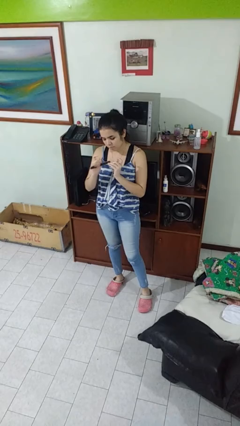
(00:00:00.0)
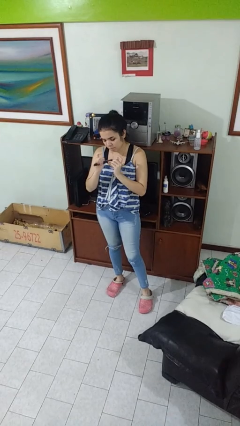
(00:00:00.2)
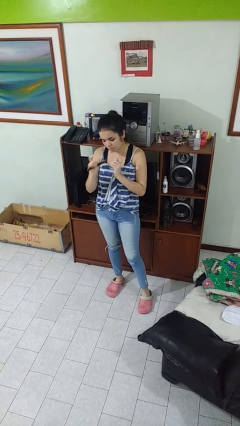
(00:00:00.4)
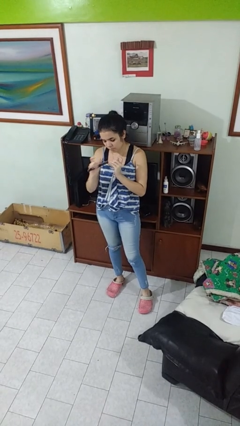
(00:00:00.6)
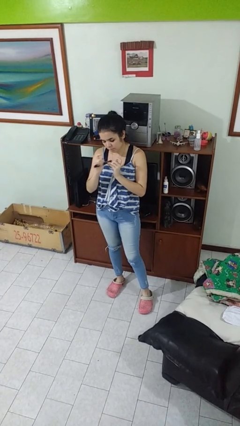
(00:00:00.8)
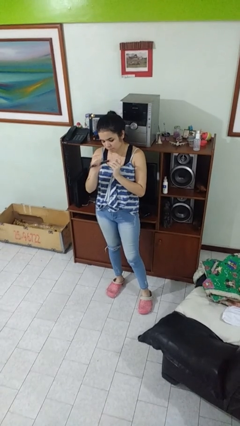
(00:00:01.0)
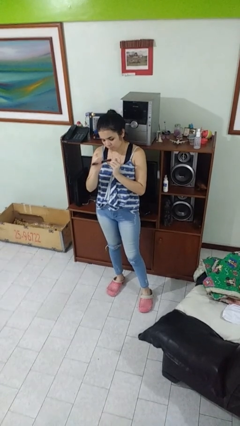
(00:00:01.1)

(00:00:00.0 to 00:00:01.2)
person files fingernails

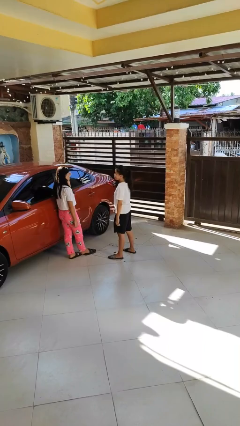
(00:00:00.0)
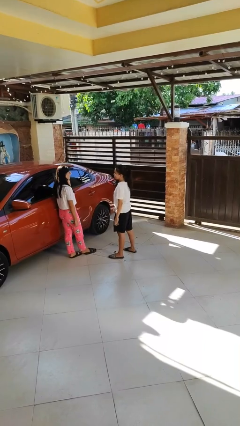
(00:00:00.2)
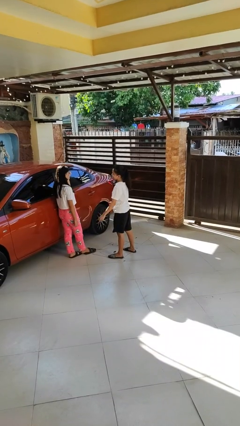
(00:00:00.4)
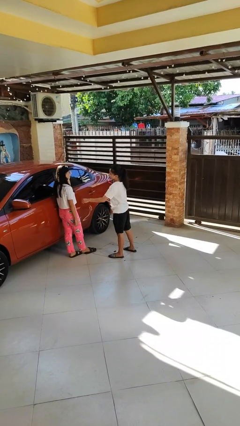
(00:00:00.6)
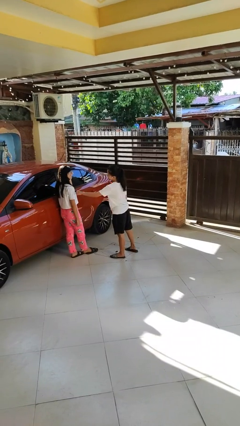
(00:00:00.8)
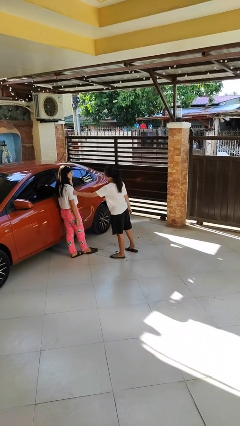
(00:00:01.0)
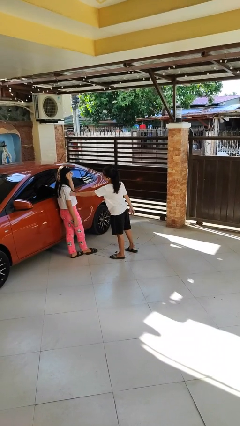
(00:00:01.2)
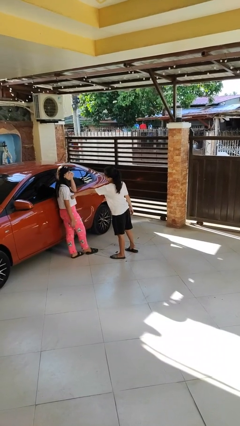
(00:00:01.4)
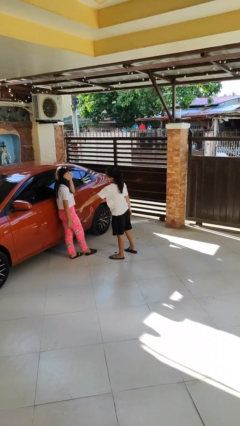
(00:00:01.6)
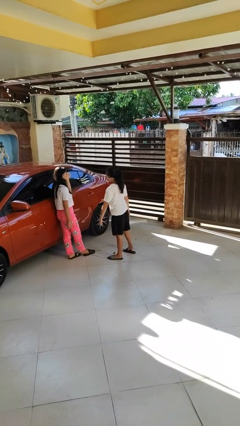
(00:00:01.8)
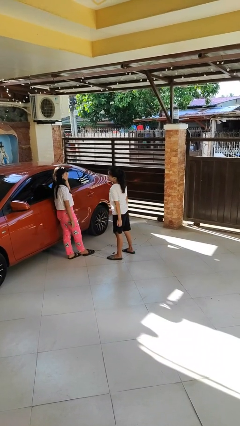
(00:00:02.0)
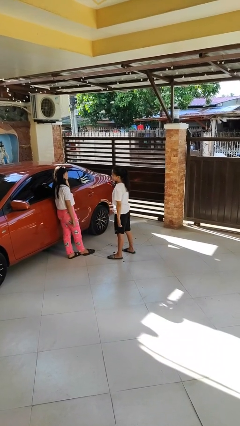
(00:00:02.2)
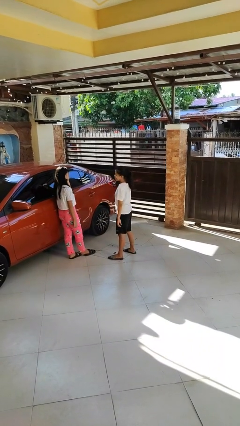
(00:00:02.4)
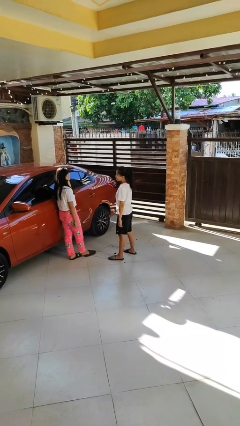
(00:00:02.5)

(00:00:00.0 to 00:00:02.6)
person pounds shoulders of person

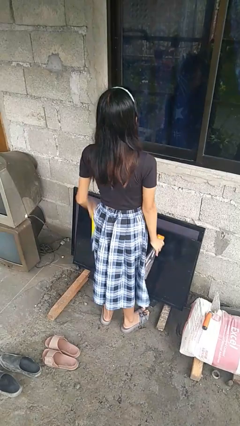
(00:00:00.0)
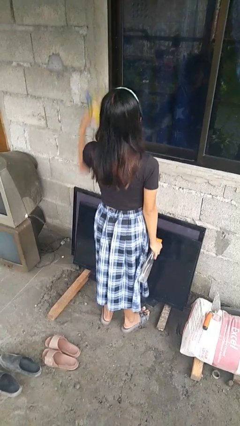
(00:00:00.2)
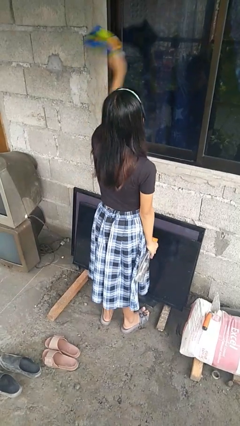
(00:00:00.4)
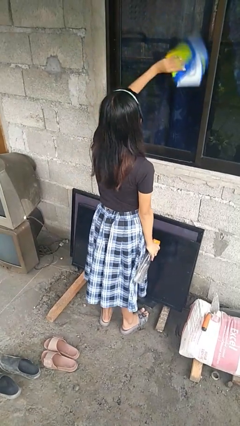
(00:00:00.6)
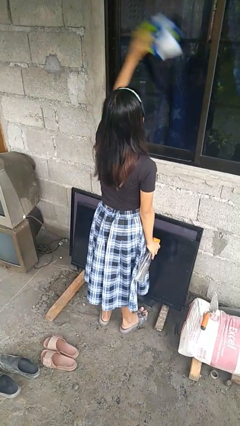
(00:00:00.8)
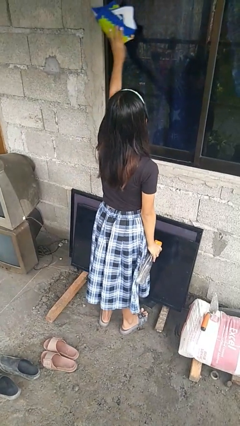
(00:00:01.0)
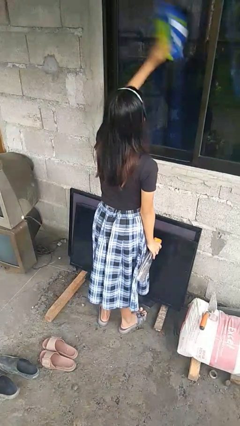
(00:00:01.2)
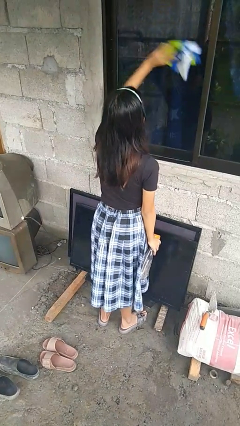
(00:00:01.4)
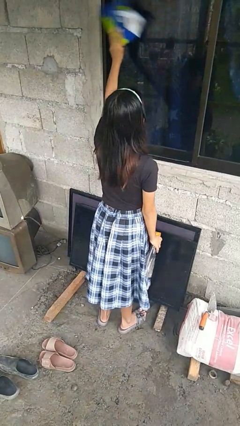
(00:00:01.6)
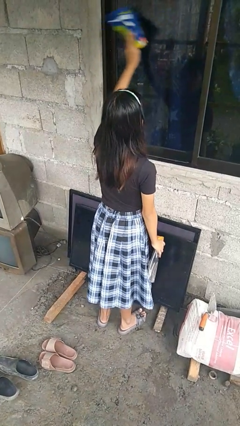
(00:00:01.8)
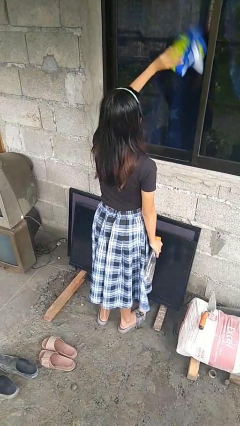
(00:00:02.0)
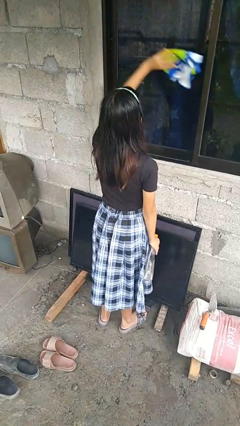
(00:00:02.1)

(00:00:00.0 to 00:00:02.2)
person washes window

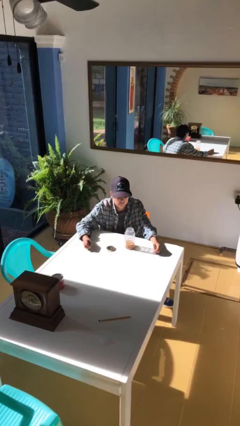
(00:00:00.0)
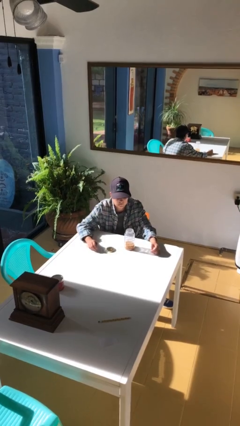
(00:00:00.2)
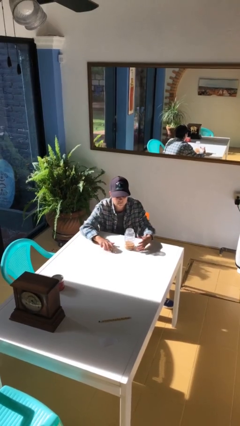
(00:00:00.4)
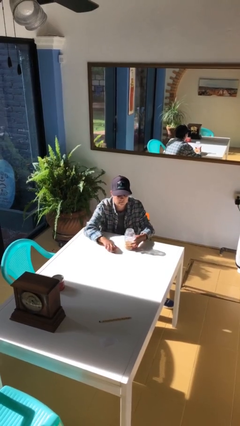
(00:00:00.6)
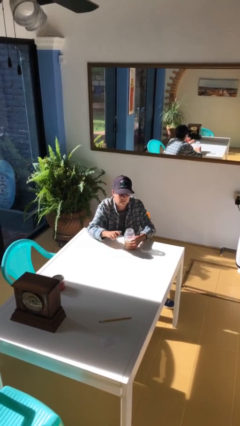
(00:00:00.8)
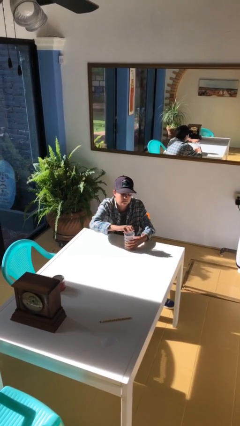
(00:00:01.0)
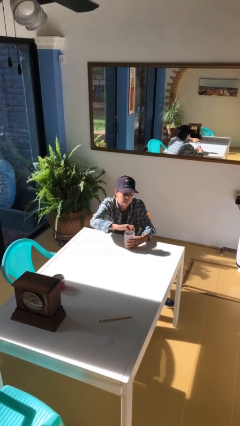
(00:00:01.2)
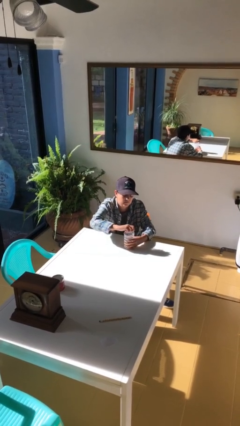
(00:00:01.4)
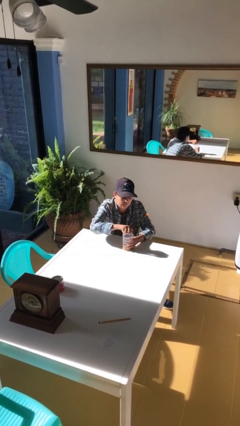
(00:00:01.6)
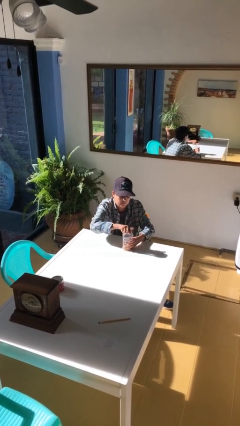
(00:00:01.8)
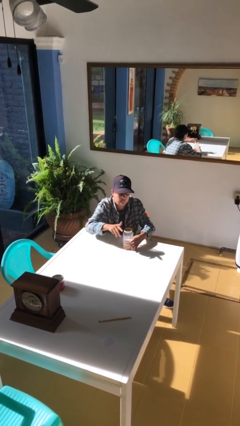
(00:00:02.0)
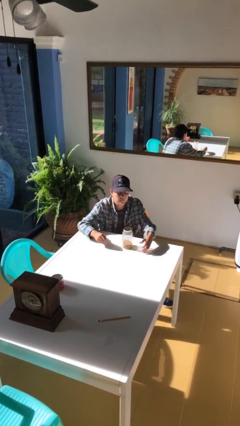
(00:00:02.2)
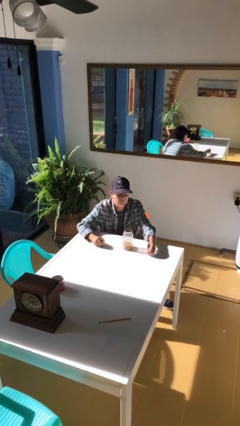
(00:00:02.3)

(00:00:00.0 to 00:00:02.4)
person closes jar

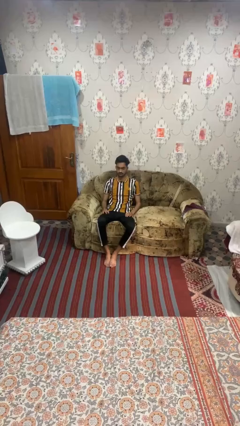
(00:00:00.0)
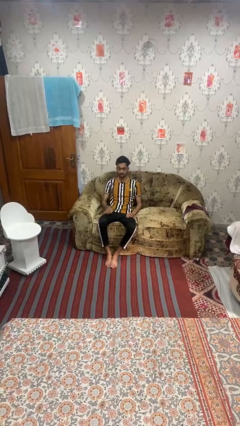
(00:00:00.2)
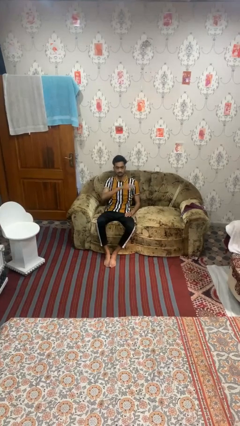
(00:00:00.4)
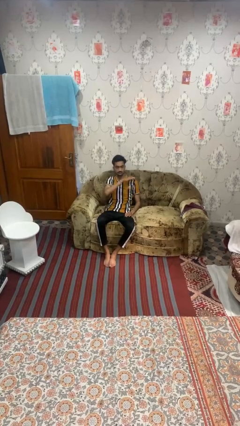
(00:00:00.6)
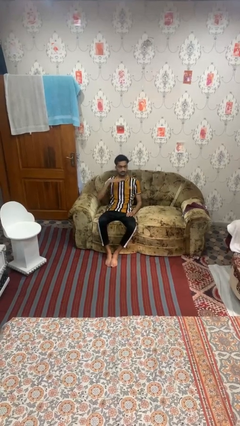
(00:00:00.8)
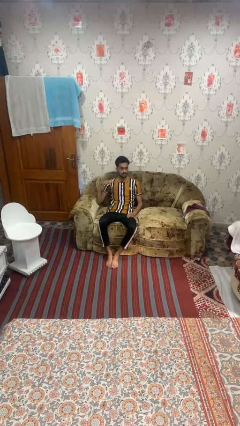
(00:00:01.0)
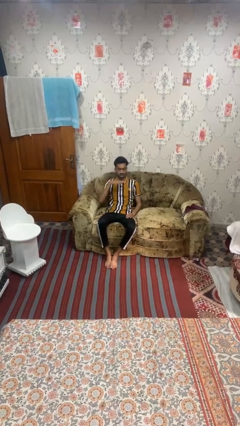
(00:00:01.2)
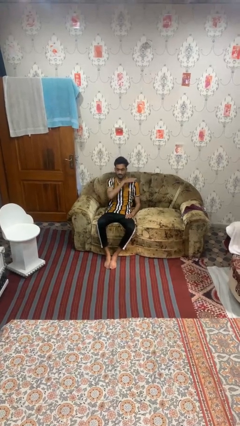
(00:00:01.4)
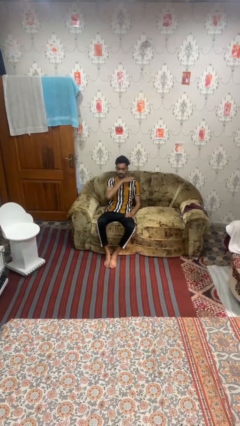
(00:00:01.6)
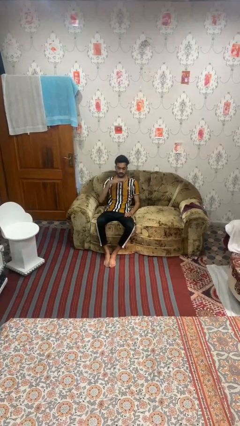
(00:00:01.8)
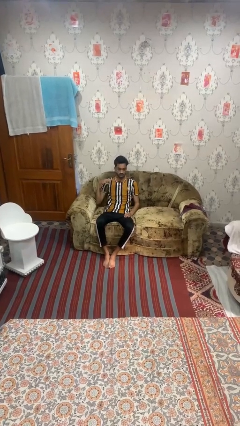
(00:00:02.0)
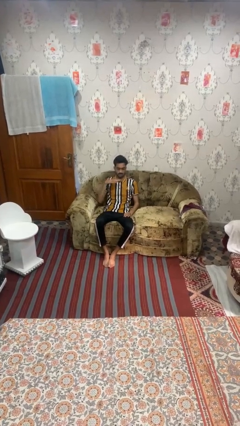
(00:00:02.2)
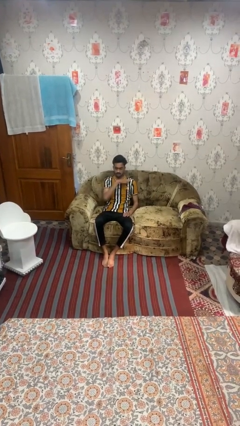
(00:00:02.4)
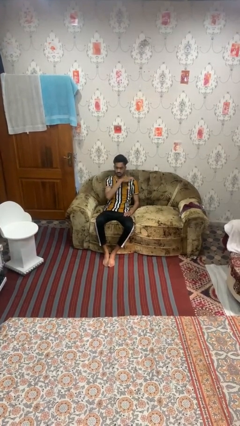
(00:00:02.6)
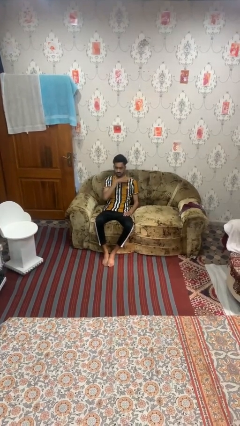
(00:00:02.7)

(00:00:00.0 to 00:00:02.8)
person gestures cut

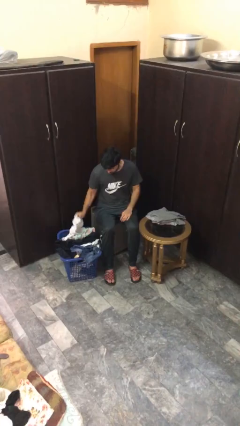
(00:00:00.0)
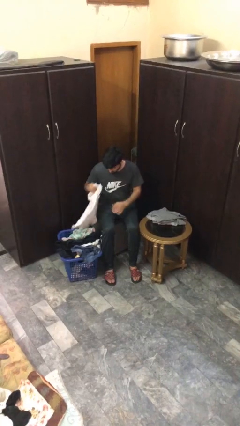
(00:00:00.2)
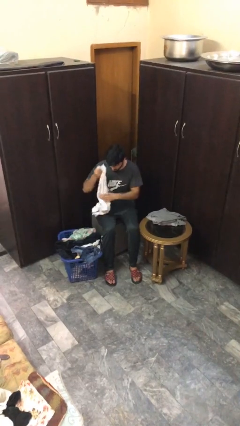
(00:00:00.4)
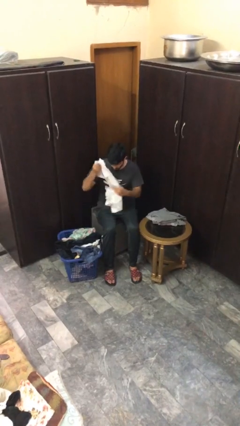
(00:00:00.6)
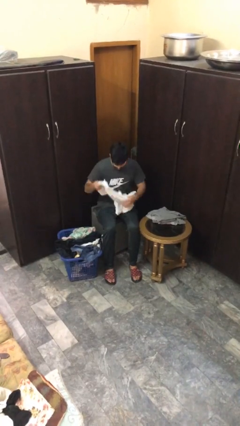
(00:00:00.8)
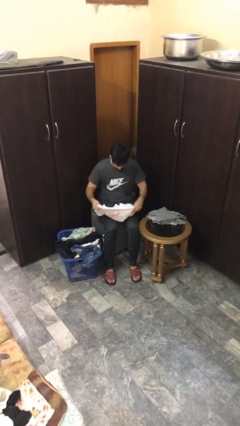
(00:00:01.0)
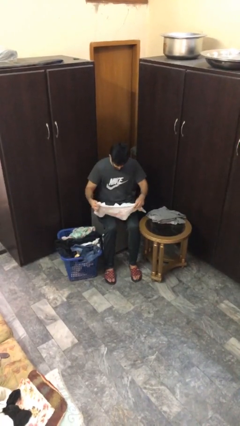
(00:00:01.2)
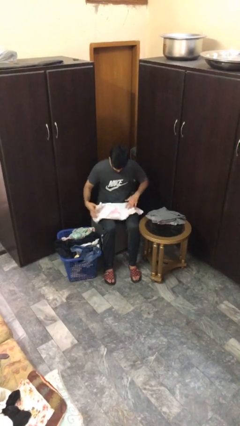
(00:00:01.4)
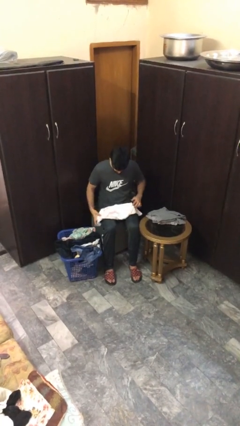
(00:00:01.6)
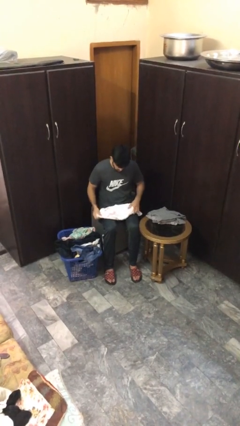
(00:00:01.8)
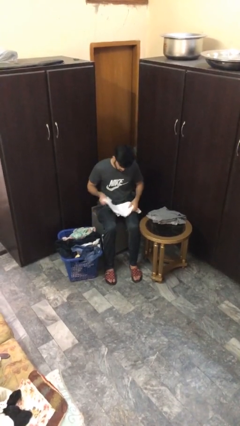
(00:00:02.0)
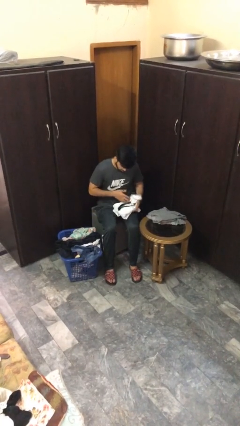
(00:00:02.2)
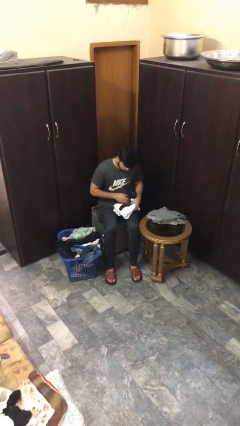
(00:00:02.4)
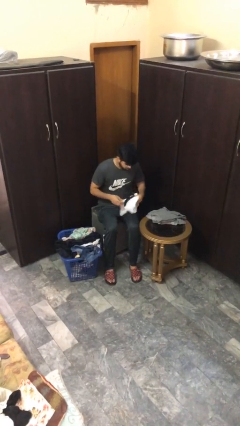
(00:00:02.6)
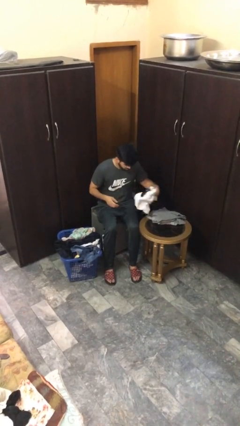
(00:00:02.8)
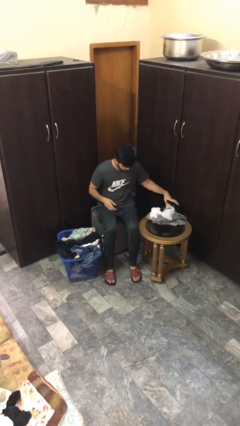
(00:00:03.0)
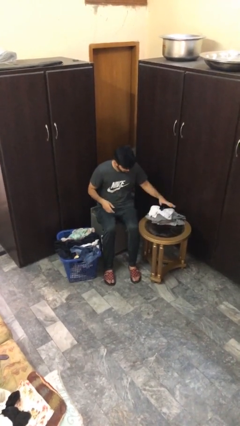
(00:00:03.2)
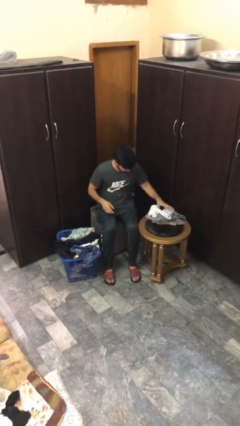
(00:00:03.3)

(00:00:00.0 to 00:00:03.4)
person folds shirt

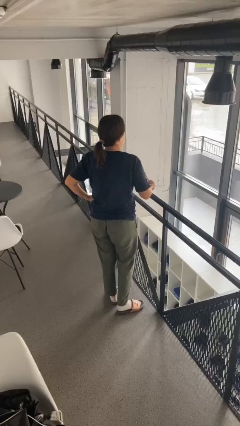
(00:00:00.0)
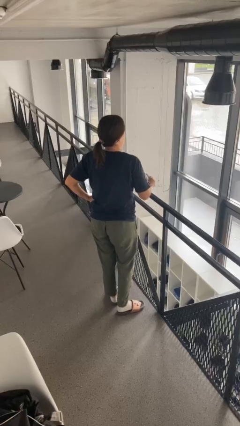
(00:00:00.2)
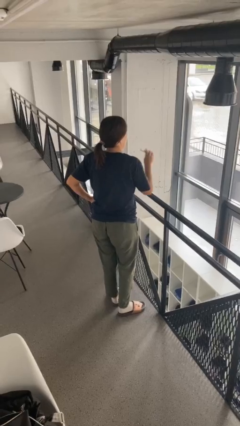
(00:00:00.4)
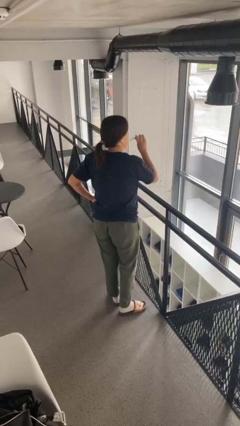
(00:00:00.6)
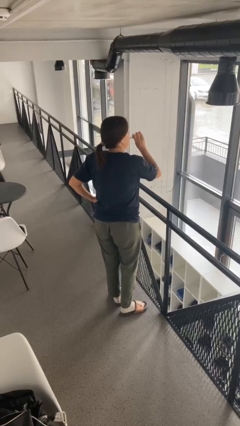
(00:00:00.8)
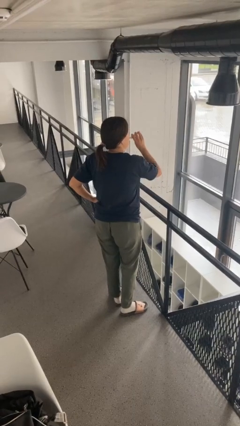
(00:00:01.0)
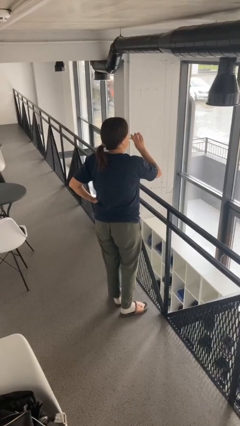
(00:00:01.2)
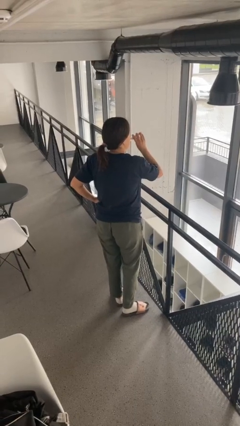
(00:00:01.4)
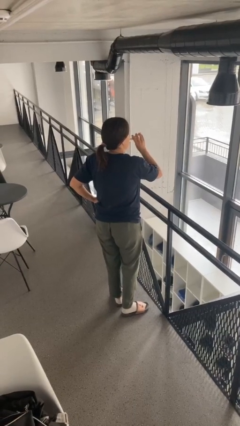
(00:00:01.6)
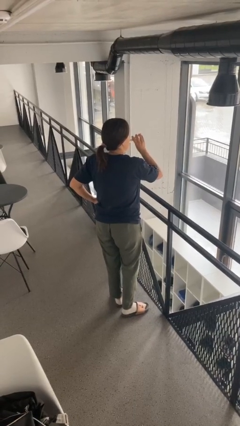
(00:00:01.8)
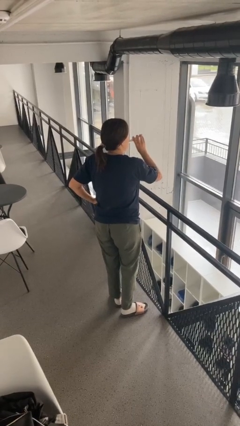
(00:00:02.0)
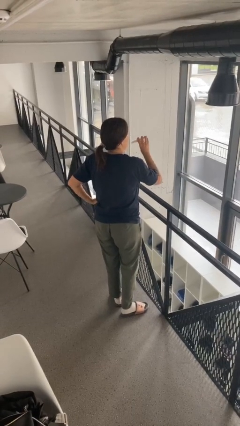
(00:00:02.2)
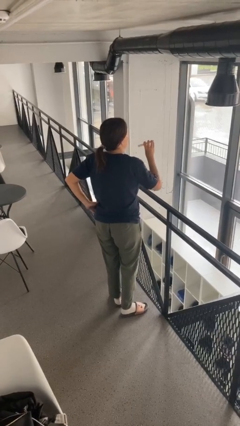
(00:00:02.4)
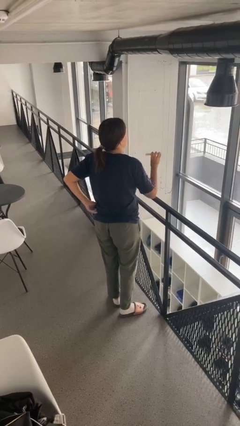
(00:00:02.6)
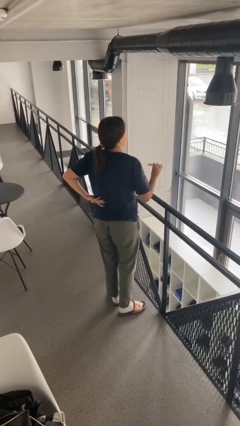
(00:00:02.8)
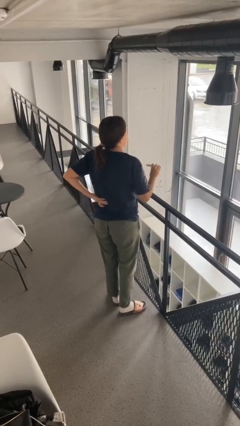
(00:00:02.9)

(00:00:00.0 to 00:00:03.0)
person vapes
